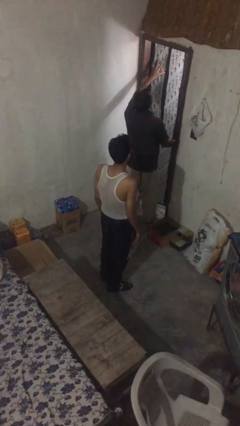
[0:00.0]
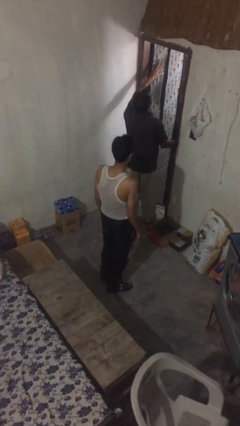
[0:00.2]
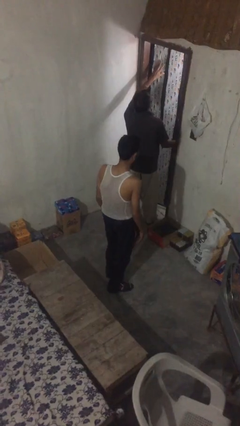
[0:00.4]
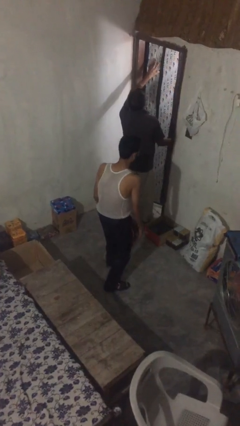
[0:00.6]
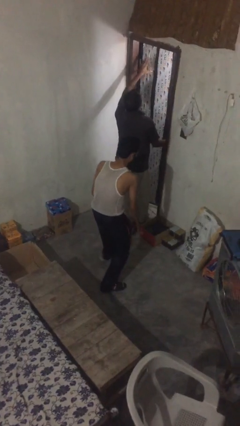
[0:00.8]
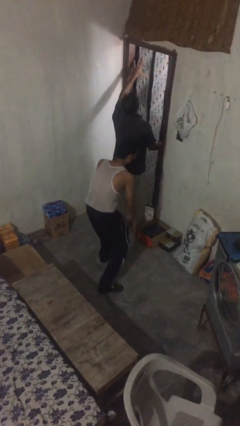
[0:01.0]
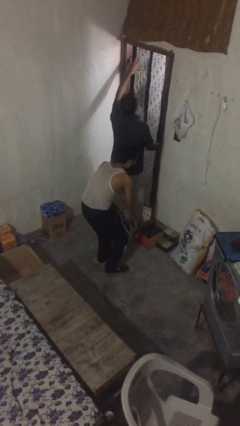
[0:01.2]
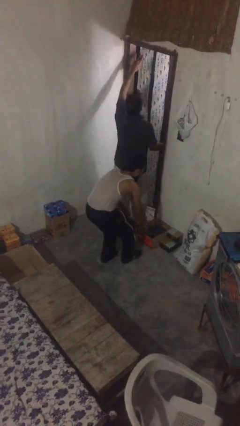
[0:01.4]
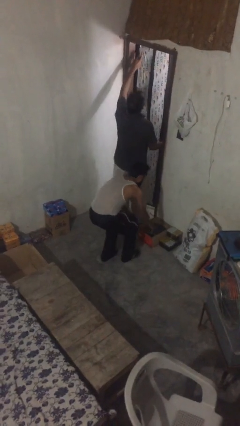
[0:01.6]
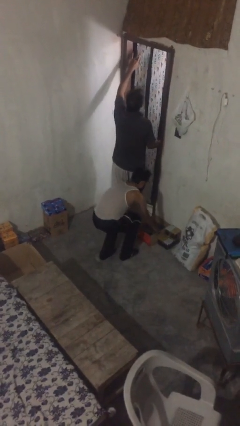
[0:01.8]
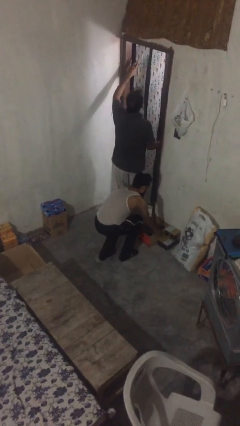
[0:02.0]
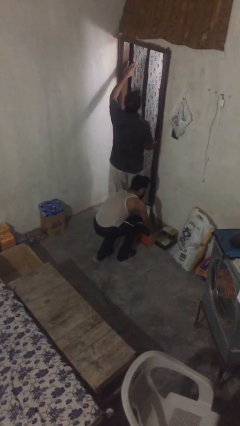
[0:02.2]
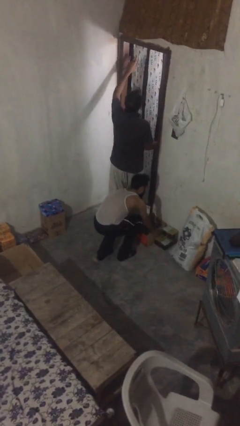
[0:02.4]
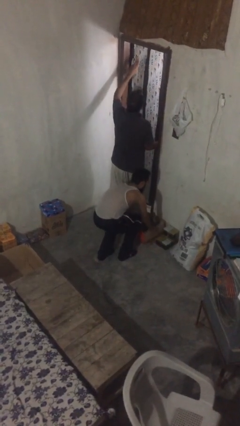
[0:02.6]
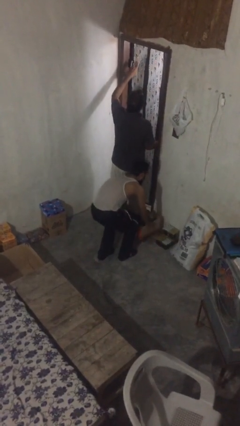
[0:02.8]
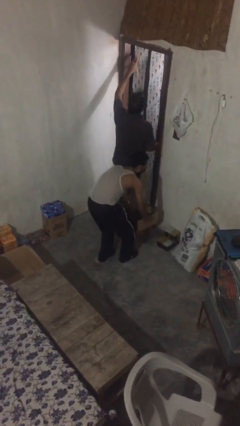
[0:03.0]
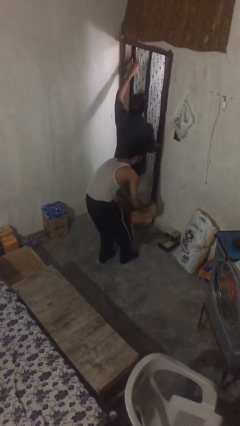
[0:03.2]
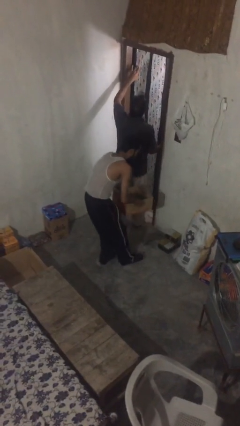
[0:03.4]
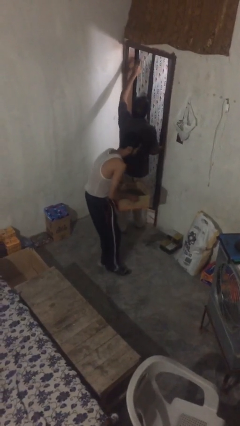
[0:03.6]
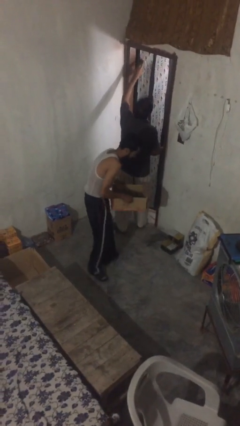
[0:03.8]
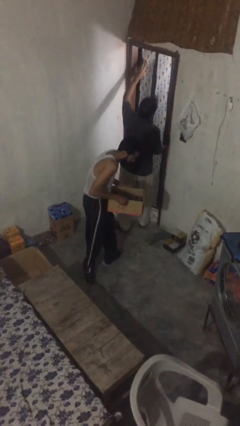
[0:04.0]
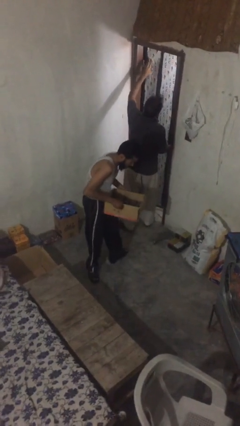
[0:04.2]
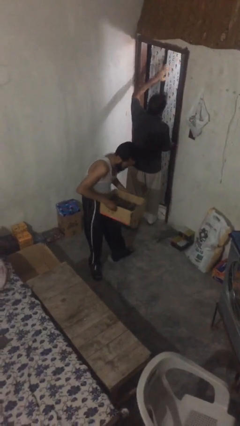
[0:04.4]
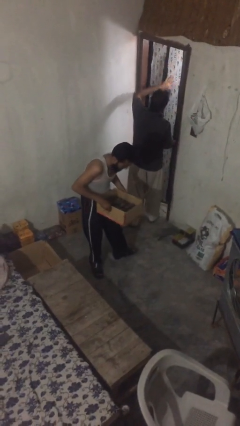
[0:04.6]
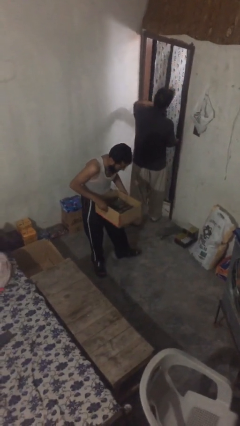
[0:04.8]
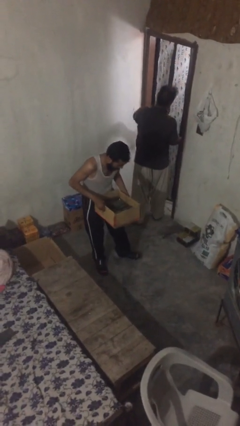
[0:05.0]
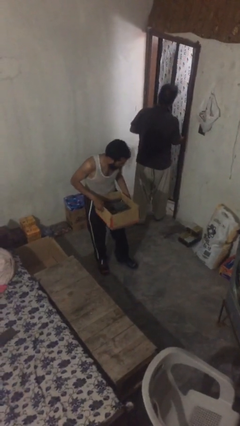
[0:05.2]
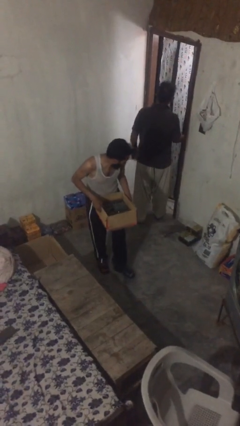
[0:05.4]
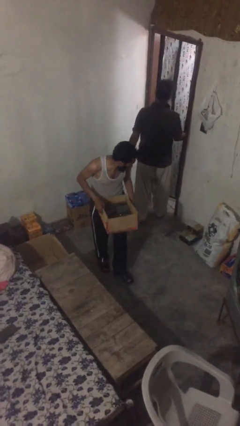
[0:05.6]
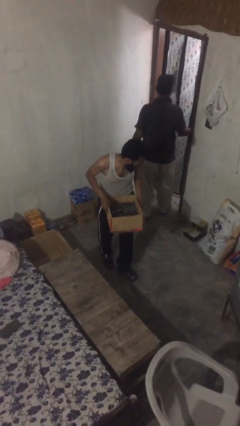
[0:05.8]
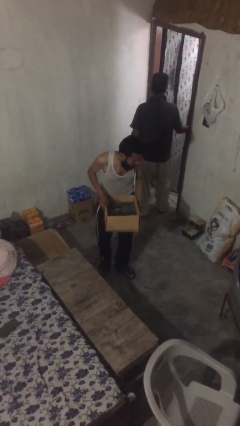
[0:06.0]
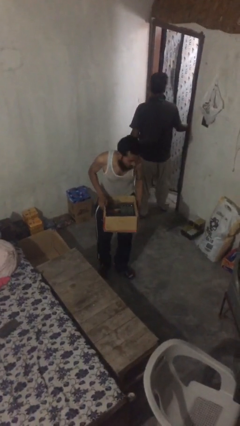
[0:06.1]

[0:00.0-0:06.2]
person steals object from person

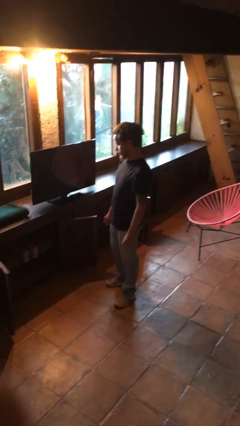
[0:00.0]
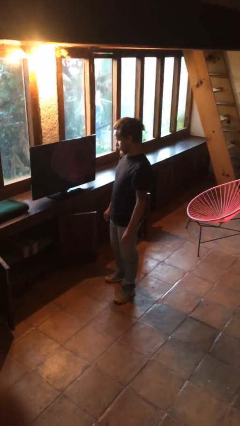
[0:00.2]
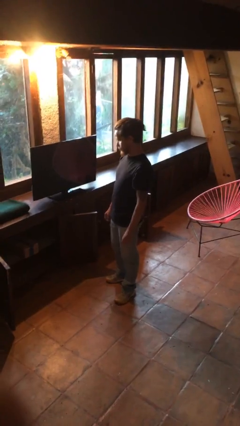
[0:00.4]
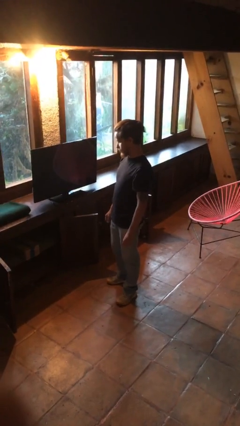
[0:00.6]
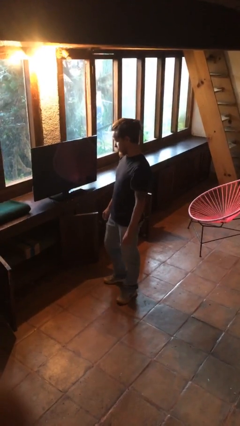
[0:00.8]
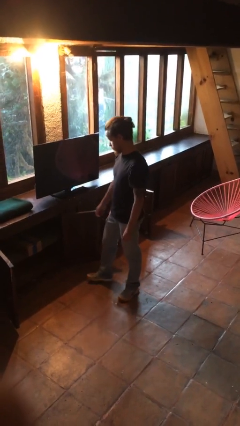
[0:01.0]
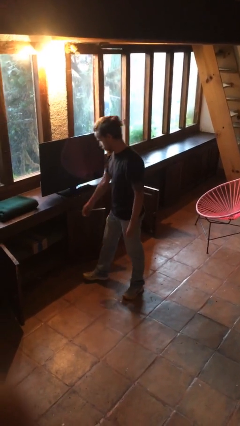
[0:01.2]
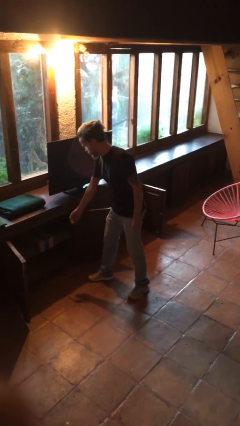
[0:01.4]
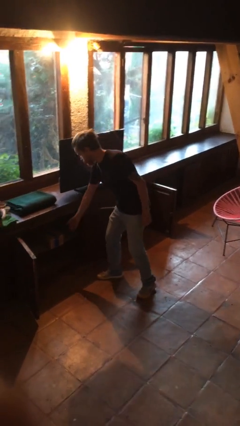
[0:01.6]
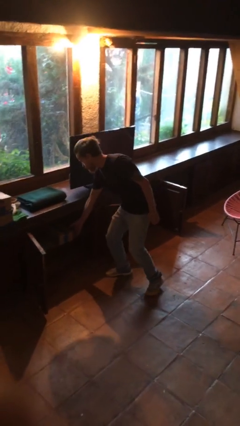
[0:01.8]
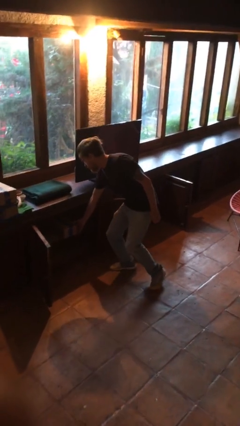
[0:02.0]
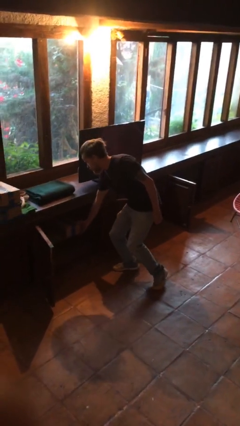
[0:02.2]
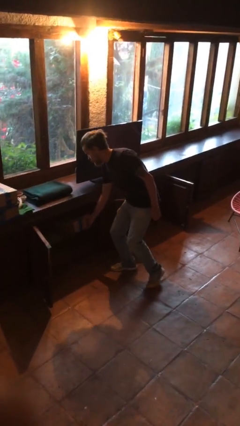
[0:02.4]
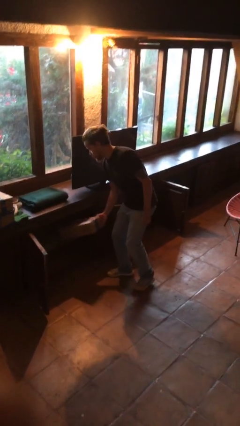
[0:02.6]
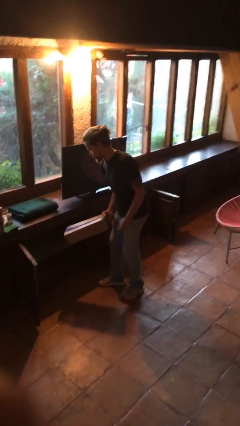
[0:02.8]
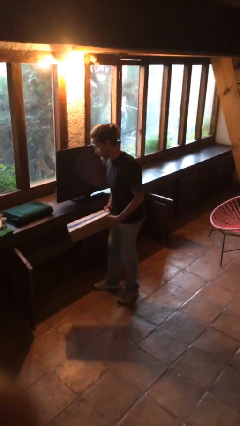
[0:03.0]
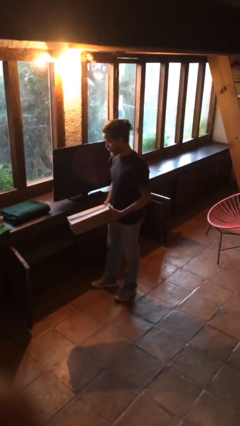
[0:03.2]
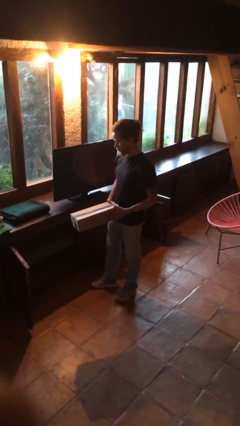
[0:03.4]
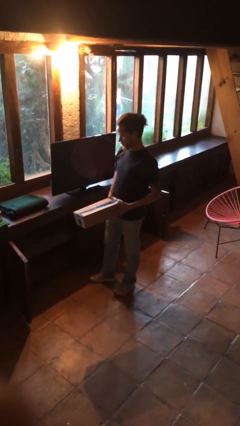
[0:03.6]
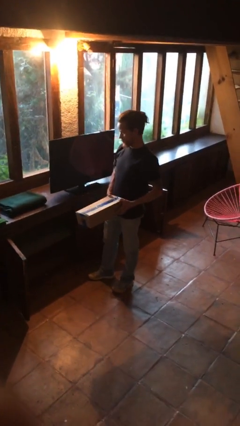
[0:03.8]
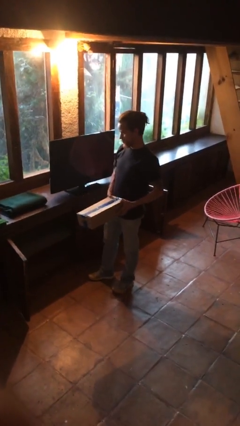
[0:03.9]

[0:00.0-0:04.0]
person picks up object from cabinet

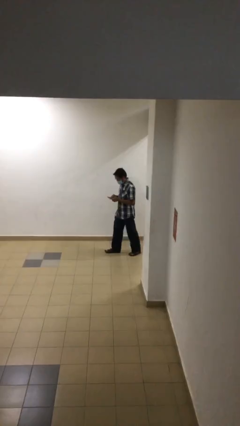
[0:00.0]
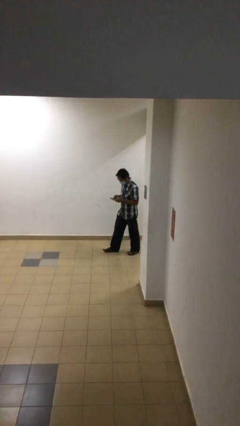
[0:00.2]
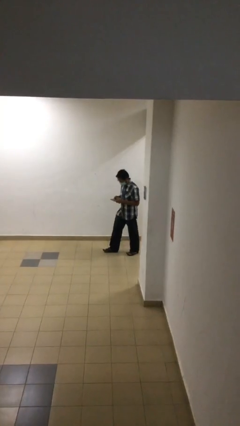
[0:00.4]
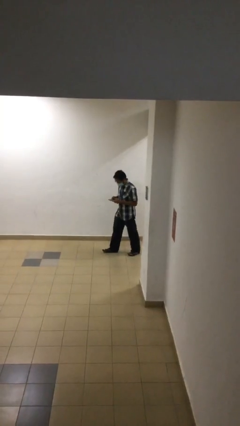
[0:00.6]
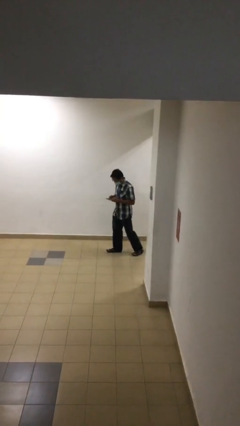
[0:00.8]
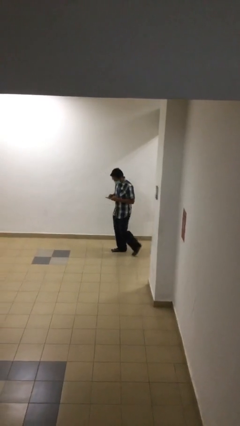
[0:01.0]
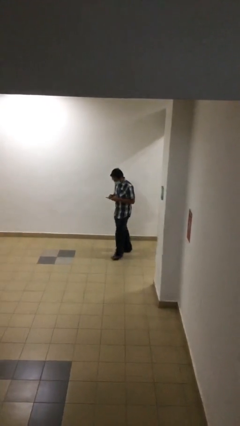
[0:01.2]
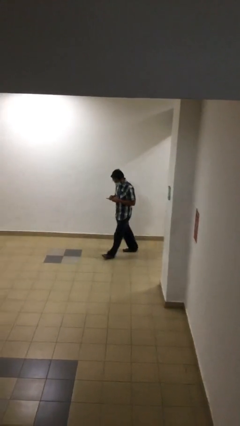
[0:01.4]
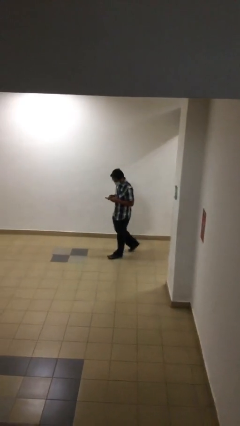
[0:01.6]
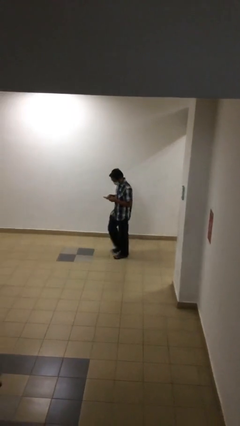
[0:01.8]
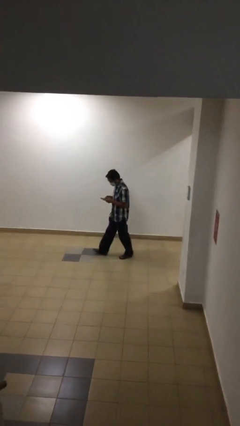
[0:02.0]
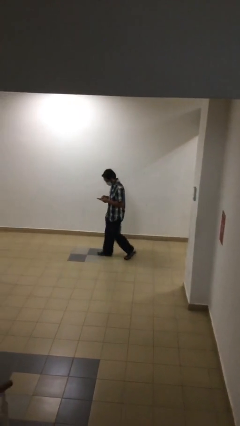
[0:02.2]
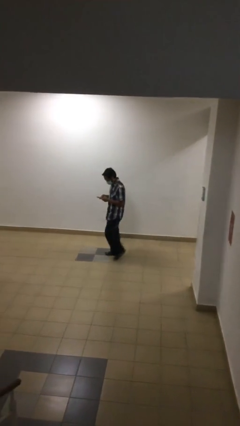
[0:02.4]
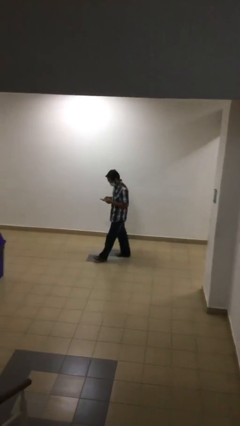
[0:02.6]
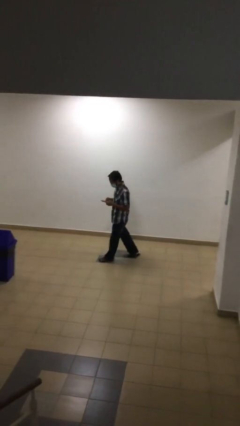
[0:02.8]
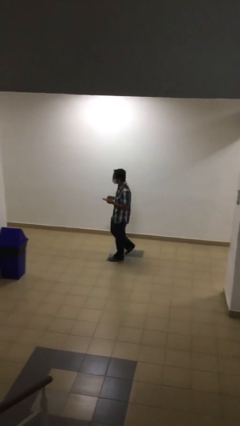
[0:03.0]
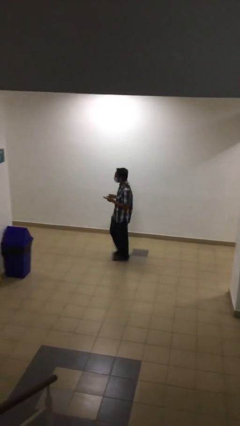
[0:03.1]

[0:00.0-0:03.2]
person texts on phone

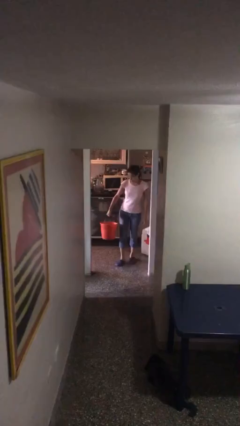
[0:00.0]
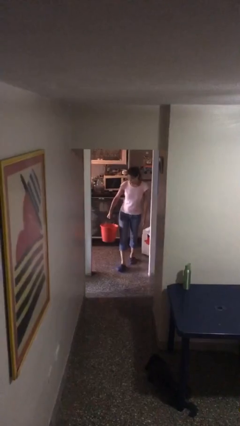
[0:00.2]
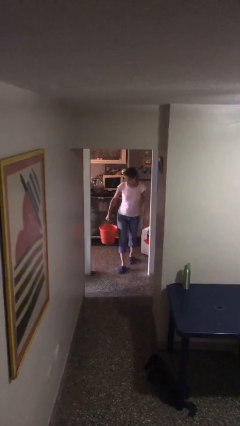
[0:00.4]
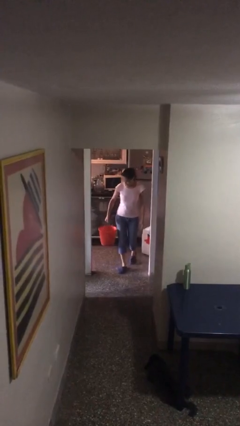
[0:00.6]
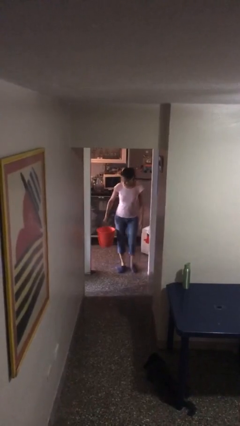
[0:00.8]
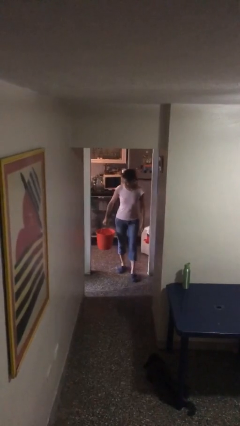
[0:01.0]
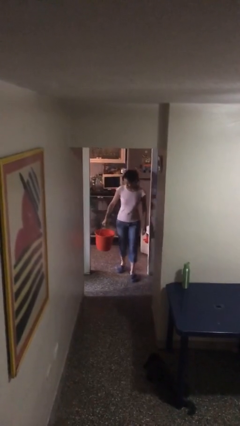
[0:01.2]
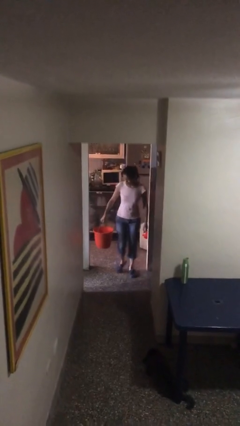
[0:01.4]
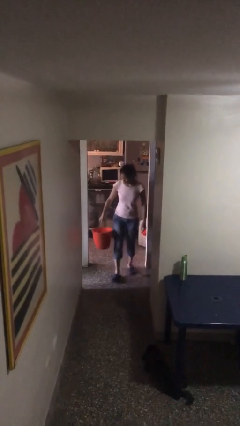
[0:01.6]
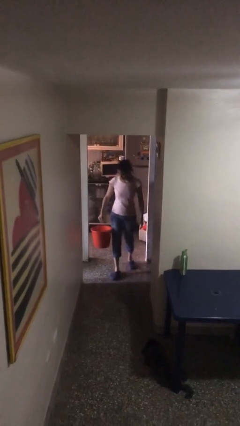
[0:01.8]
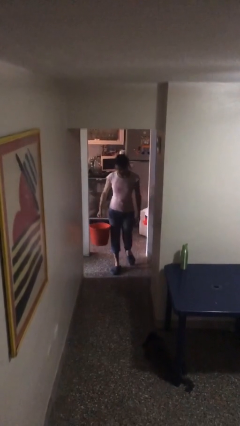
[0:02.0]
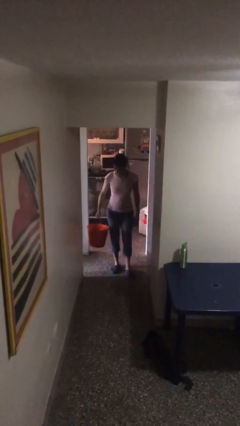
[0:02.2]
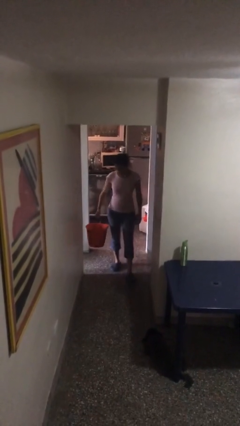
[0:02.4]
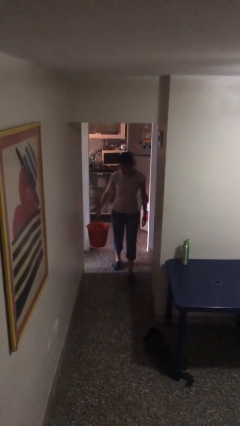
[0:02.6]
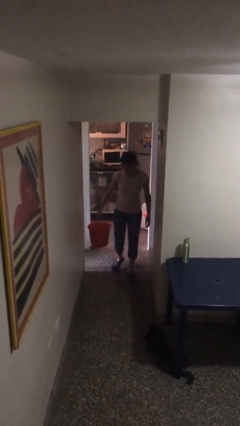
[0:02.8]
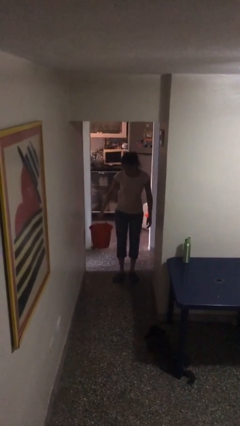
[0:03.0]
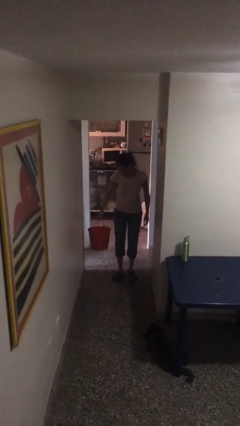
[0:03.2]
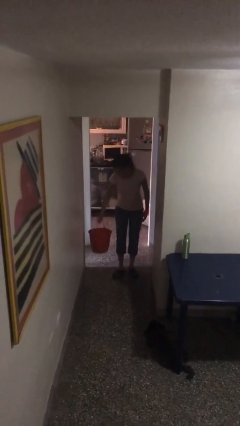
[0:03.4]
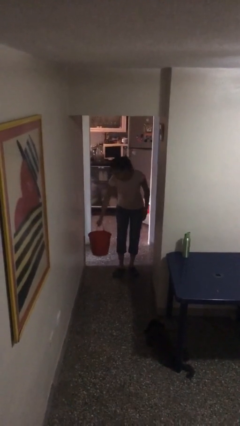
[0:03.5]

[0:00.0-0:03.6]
person carries heavy object

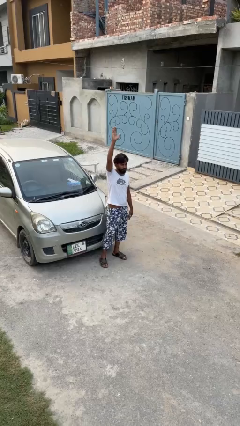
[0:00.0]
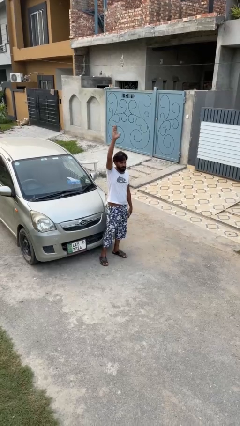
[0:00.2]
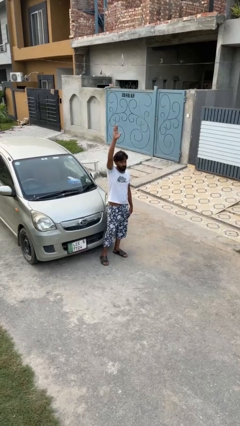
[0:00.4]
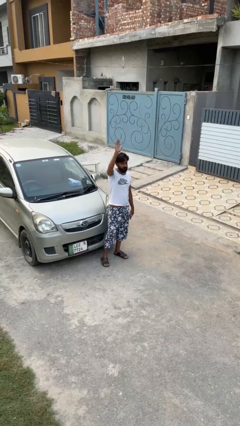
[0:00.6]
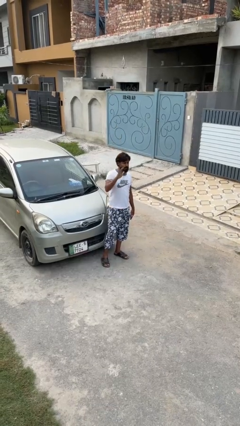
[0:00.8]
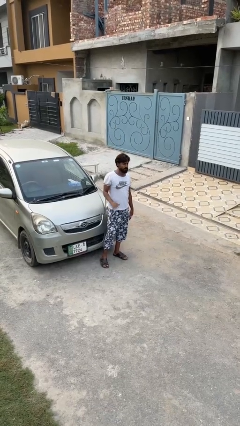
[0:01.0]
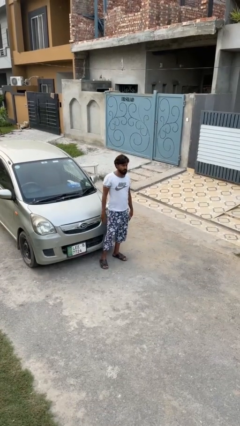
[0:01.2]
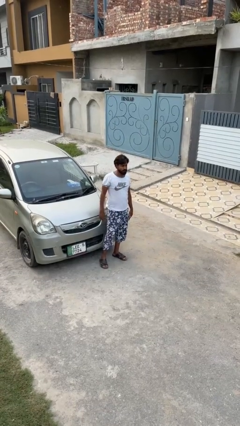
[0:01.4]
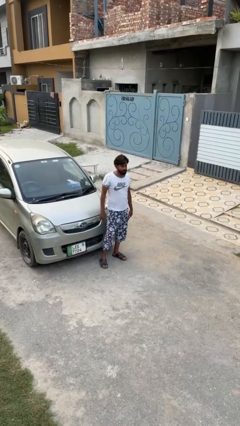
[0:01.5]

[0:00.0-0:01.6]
person gestures lower hand
